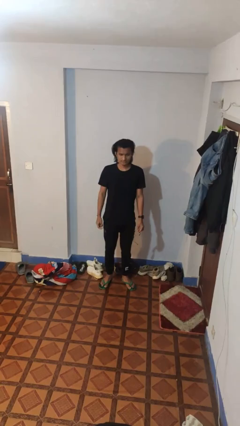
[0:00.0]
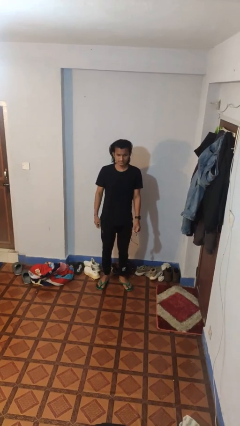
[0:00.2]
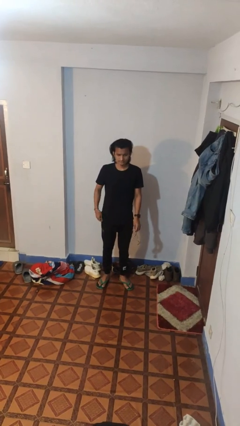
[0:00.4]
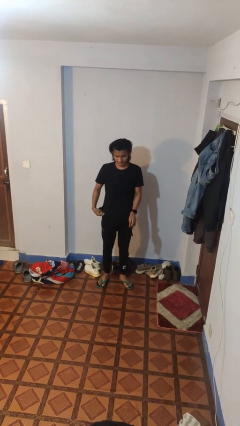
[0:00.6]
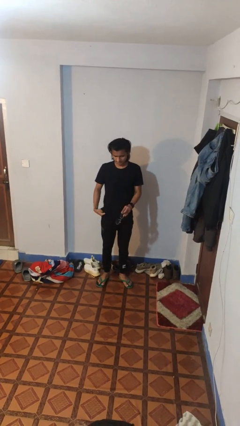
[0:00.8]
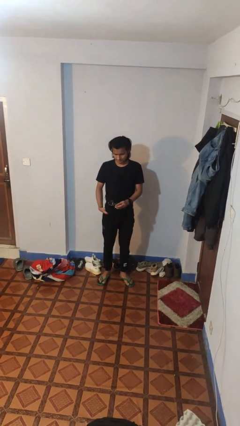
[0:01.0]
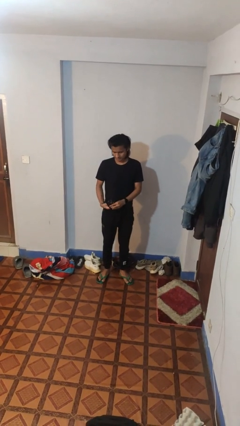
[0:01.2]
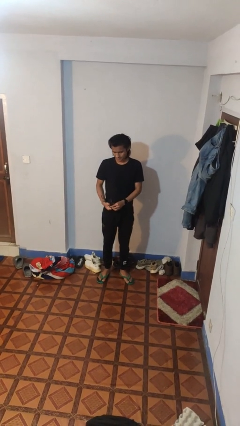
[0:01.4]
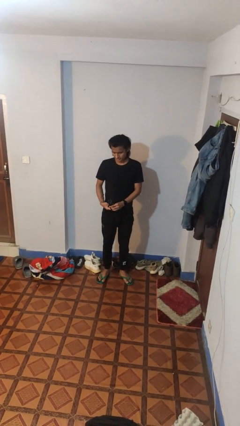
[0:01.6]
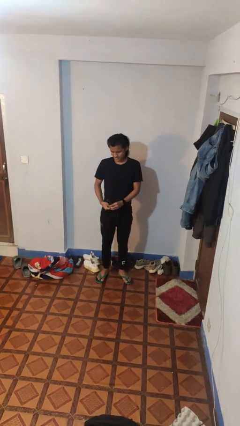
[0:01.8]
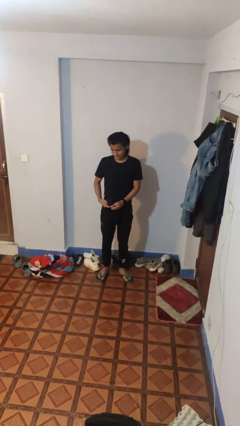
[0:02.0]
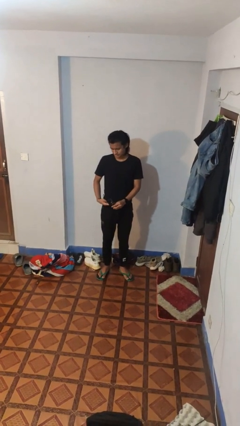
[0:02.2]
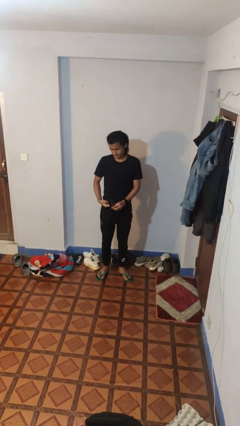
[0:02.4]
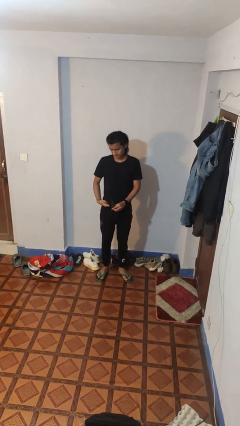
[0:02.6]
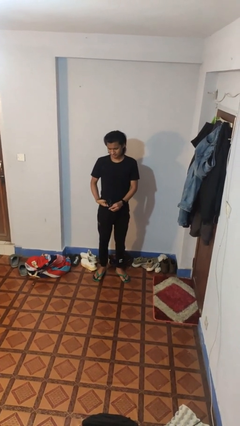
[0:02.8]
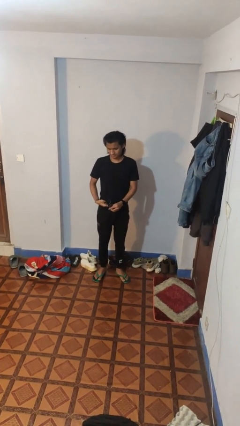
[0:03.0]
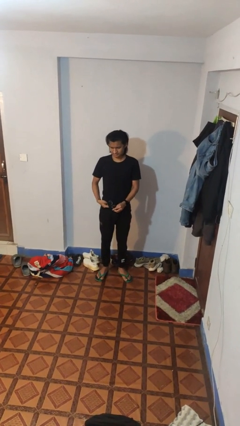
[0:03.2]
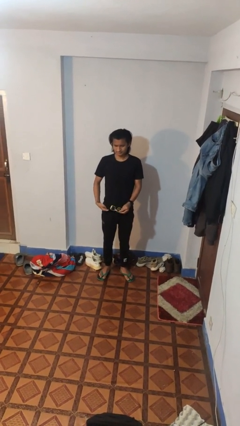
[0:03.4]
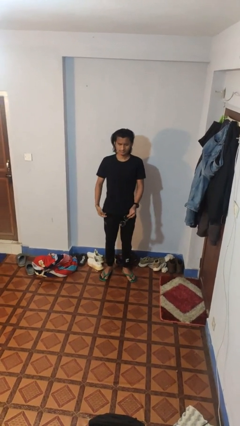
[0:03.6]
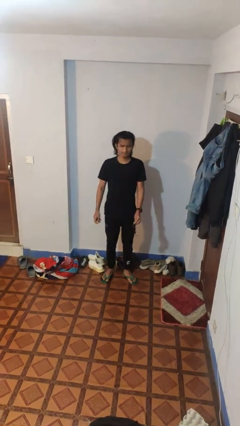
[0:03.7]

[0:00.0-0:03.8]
person cleans eyeglasses

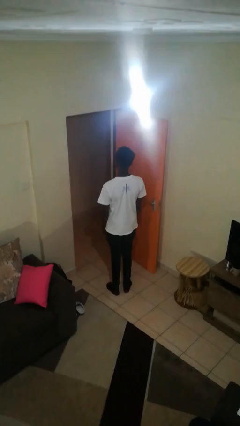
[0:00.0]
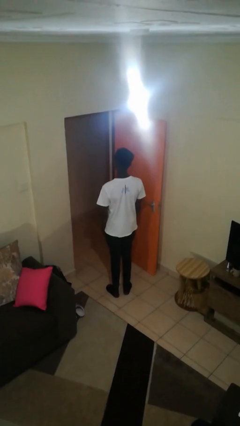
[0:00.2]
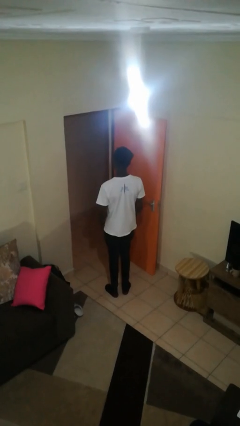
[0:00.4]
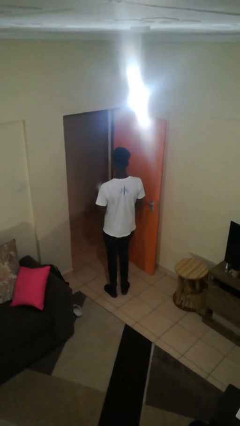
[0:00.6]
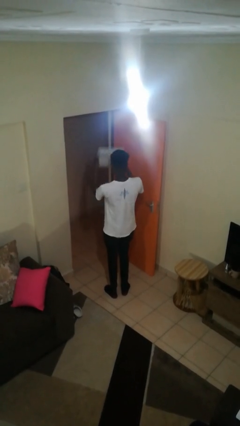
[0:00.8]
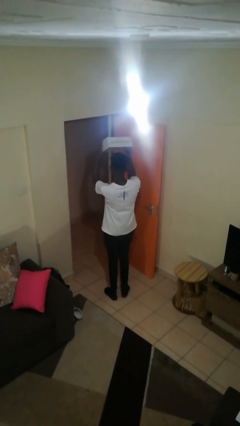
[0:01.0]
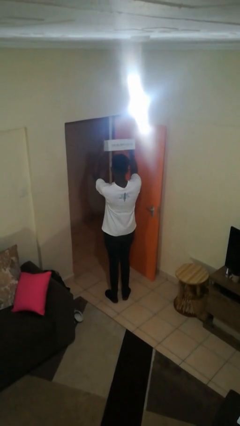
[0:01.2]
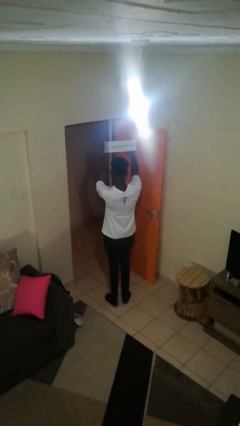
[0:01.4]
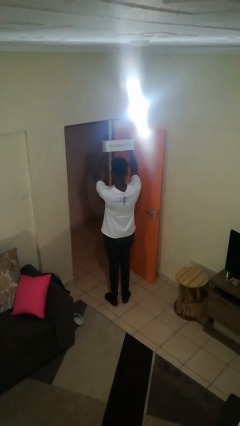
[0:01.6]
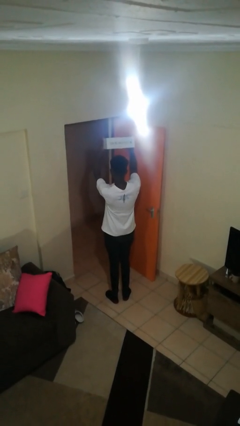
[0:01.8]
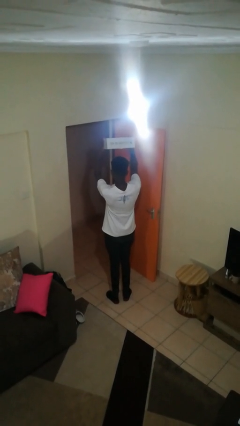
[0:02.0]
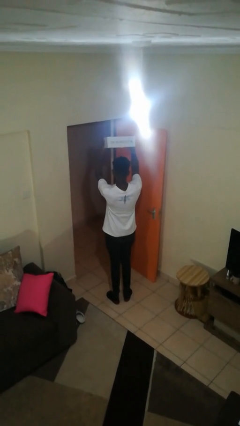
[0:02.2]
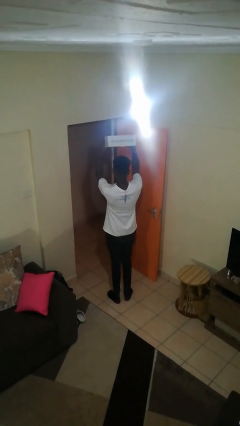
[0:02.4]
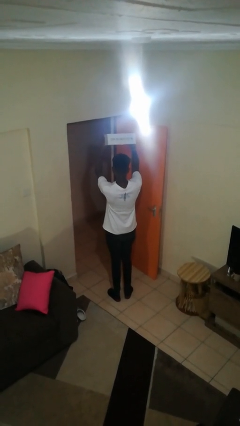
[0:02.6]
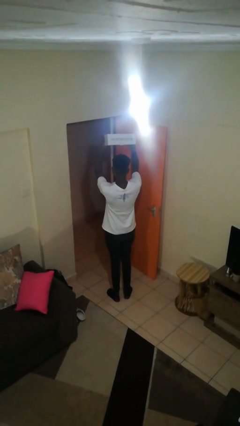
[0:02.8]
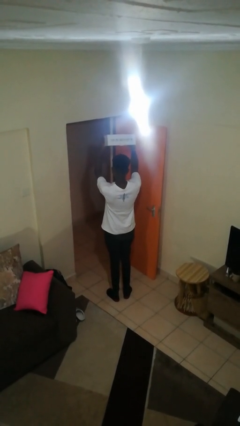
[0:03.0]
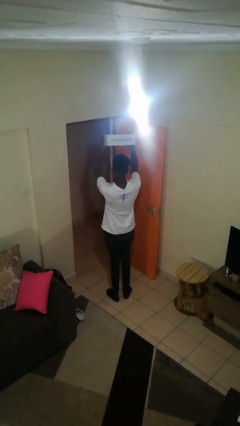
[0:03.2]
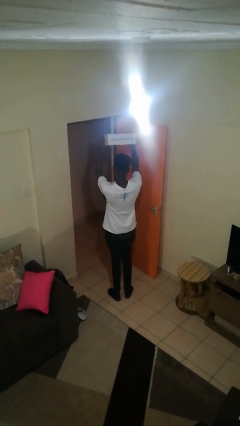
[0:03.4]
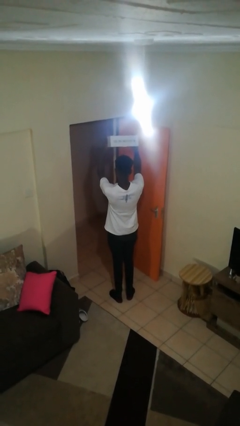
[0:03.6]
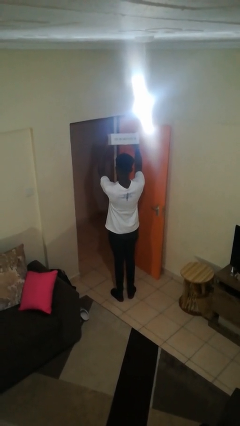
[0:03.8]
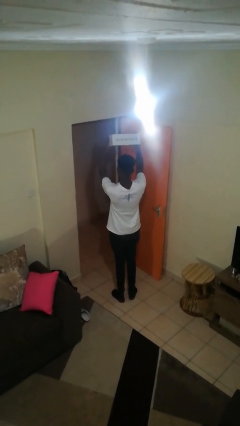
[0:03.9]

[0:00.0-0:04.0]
person holds object above head

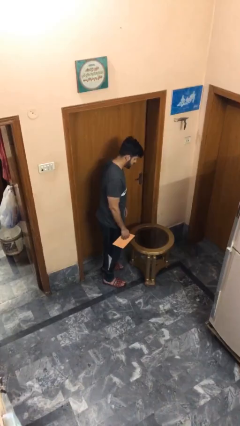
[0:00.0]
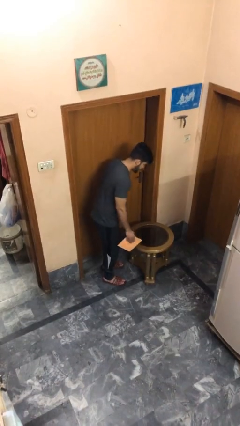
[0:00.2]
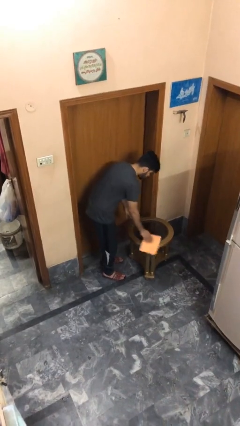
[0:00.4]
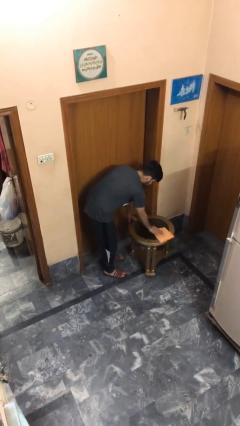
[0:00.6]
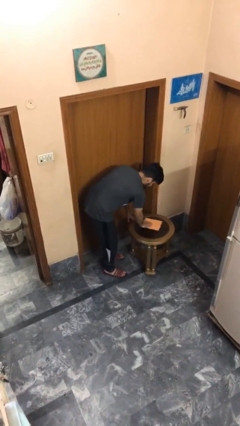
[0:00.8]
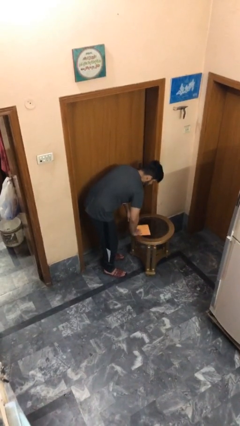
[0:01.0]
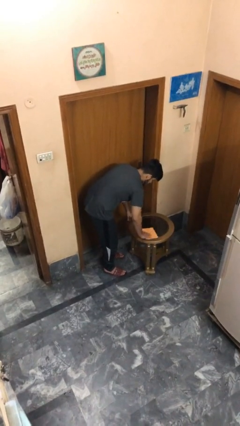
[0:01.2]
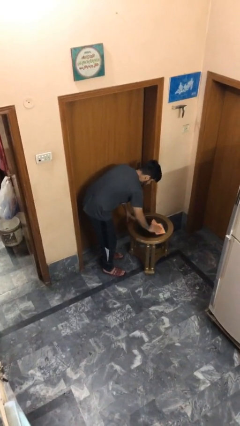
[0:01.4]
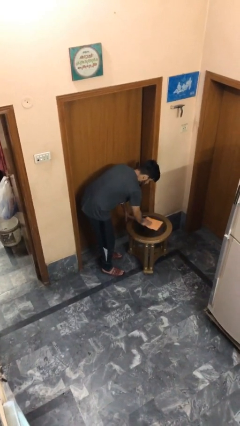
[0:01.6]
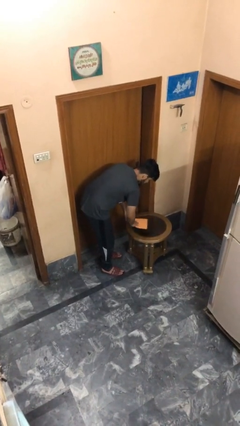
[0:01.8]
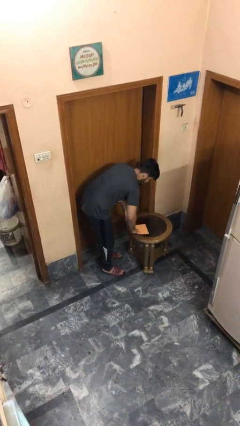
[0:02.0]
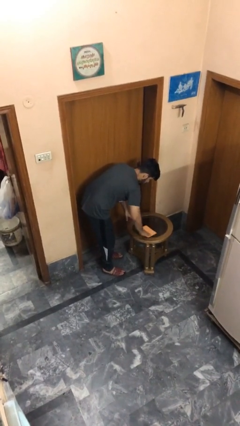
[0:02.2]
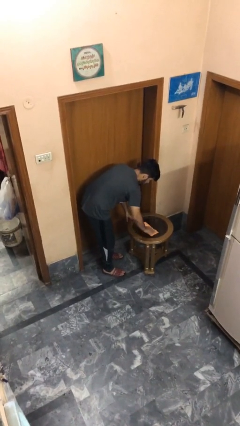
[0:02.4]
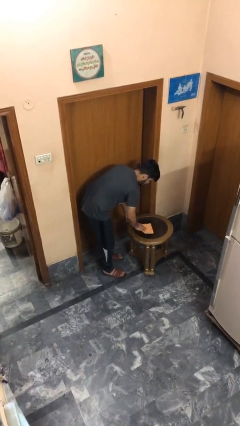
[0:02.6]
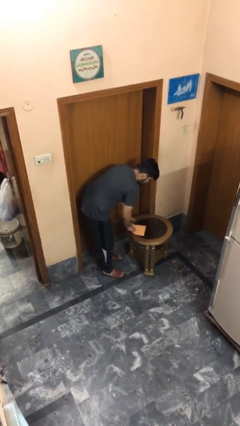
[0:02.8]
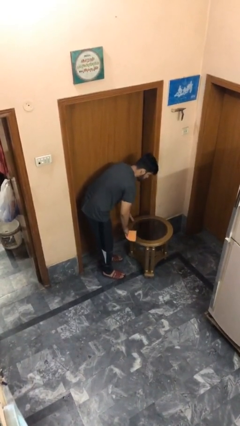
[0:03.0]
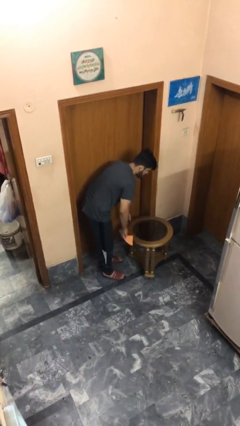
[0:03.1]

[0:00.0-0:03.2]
person cleans table with rag

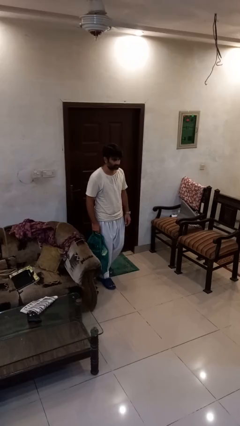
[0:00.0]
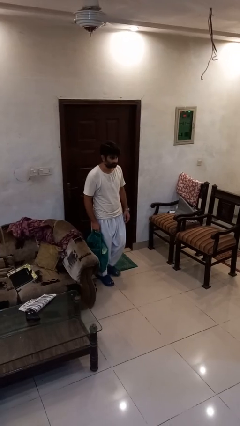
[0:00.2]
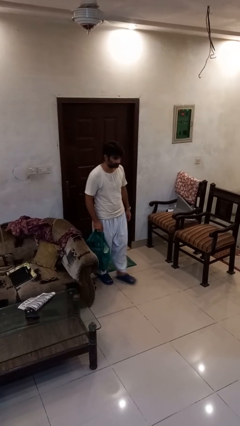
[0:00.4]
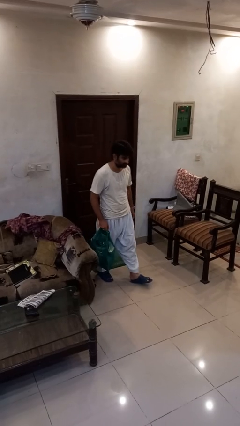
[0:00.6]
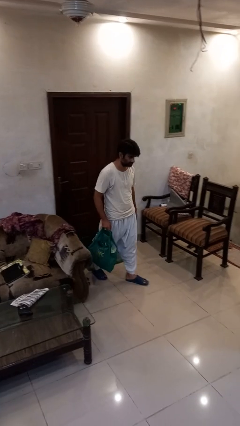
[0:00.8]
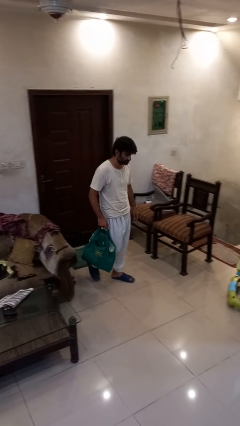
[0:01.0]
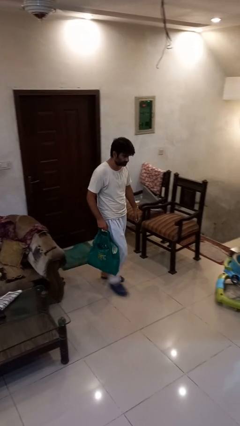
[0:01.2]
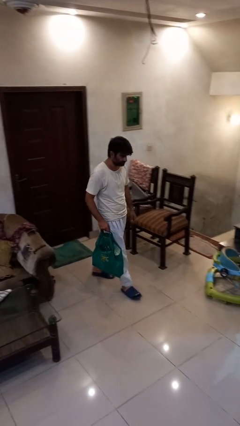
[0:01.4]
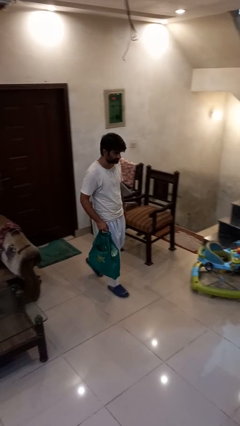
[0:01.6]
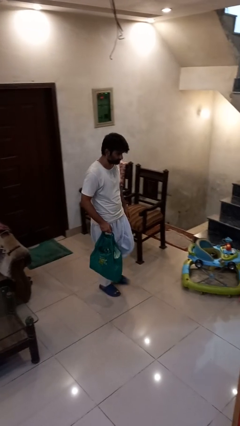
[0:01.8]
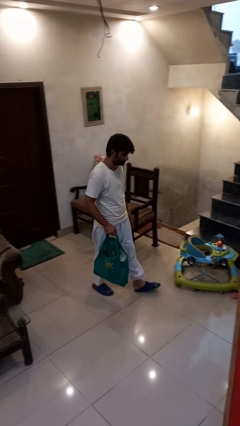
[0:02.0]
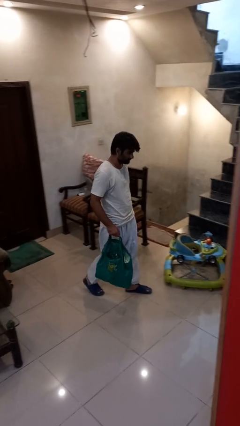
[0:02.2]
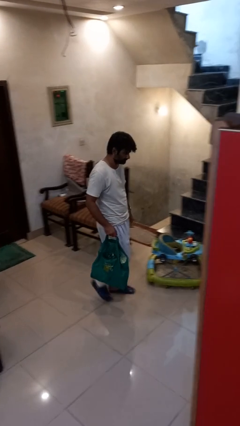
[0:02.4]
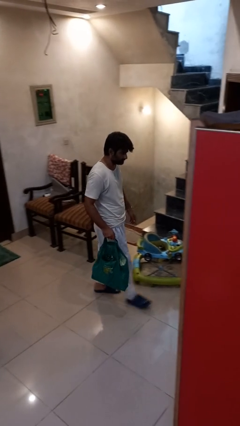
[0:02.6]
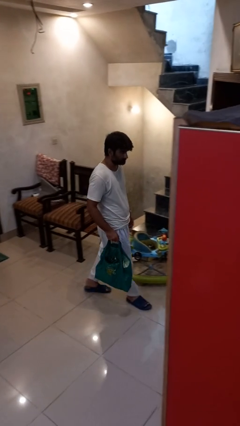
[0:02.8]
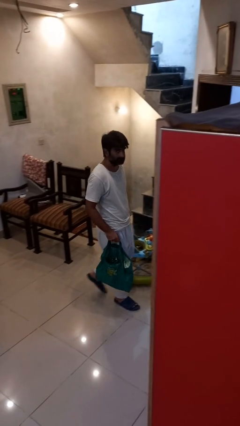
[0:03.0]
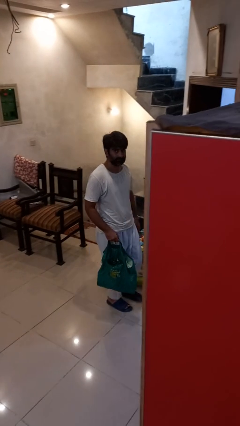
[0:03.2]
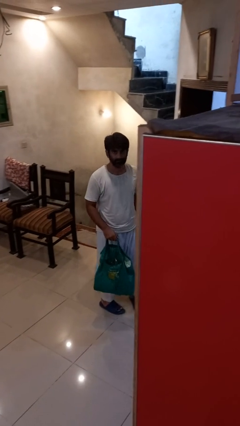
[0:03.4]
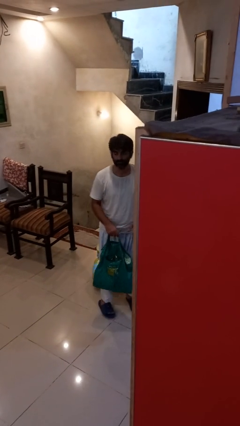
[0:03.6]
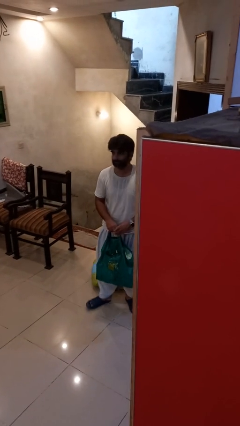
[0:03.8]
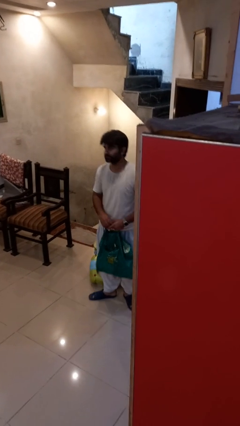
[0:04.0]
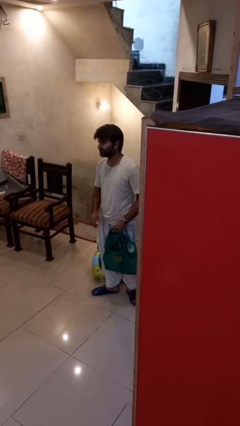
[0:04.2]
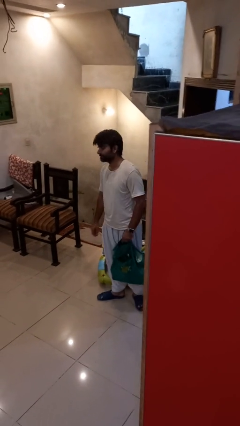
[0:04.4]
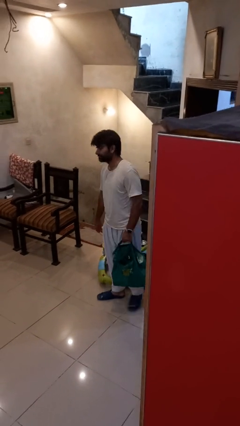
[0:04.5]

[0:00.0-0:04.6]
person carries groceries

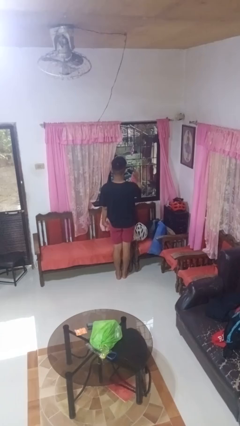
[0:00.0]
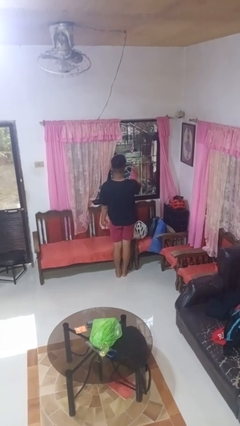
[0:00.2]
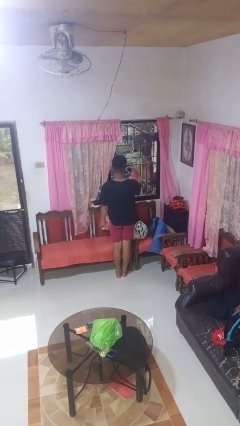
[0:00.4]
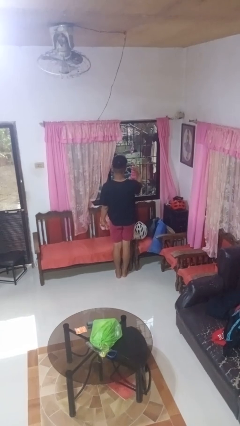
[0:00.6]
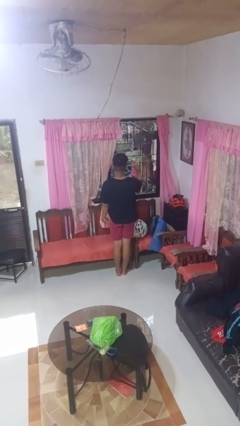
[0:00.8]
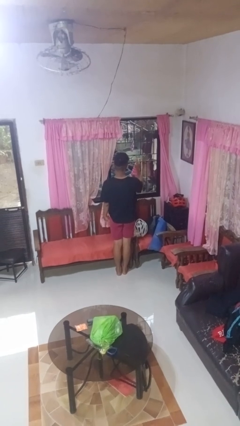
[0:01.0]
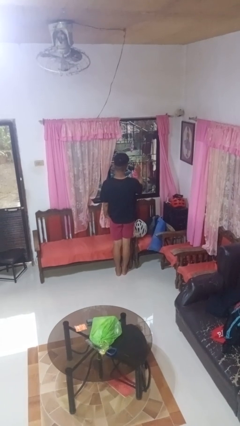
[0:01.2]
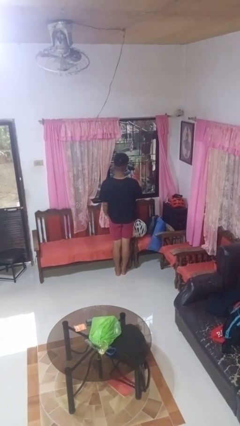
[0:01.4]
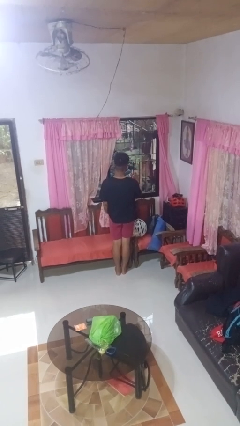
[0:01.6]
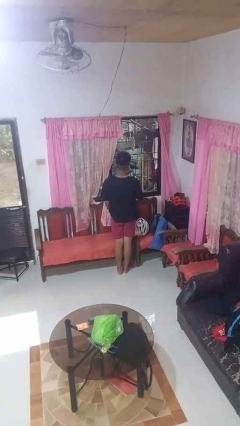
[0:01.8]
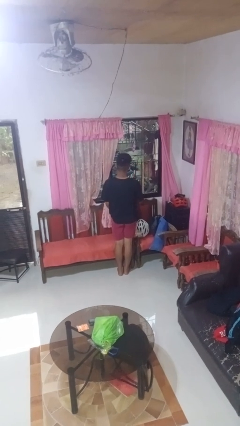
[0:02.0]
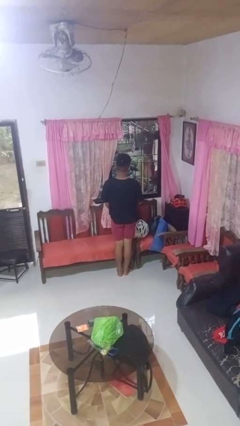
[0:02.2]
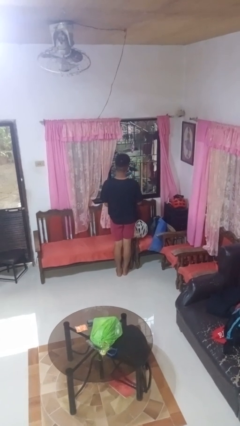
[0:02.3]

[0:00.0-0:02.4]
person sprays from bottle
